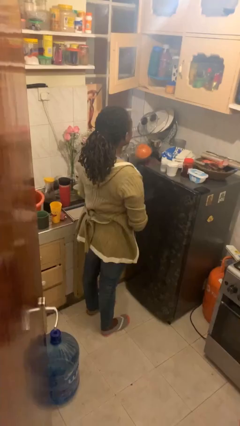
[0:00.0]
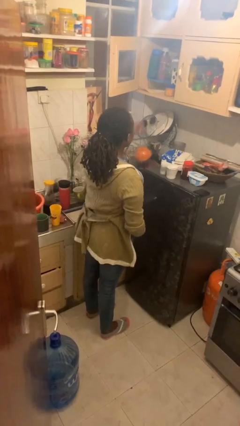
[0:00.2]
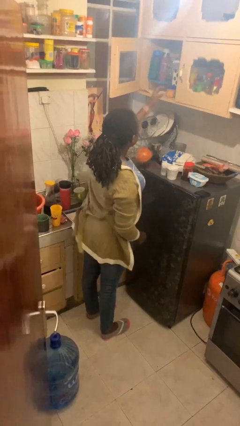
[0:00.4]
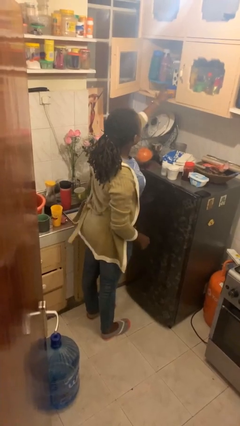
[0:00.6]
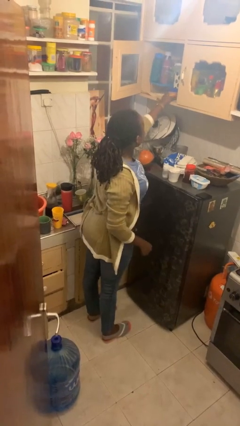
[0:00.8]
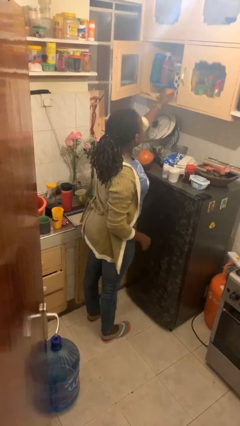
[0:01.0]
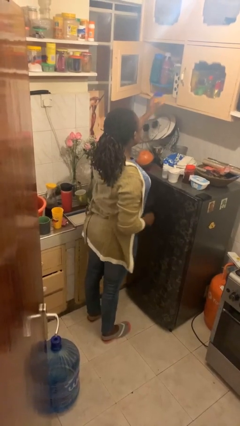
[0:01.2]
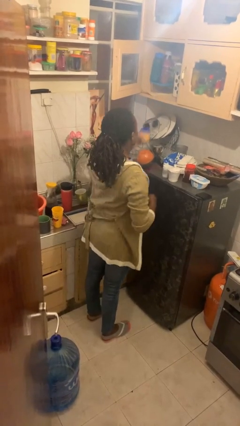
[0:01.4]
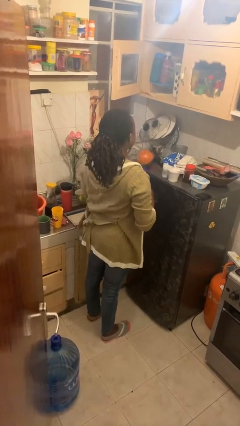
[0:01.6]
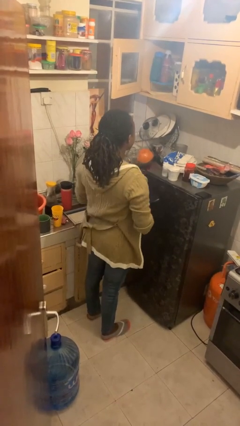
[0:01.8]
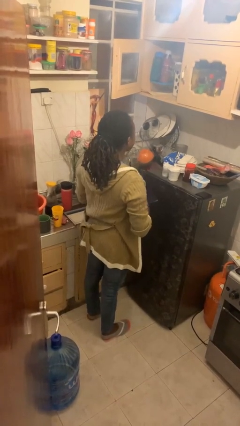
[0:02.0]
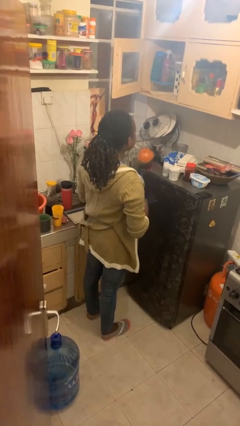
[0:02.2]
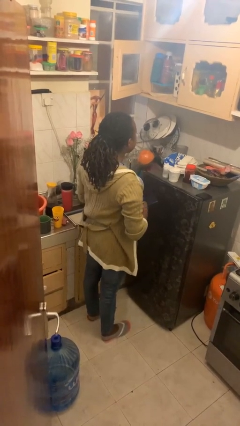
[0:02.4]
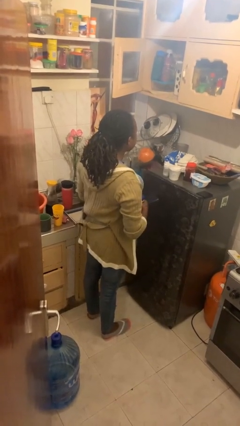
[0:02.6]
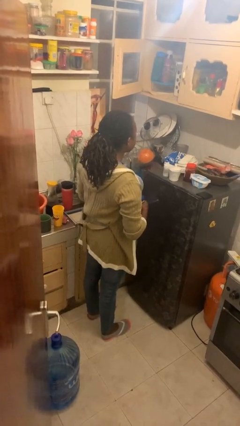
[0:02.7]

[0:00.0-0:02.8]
person picks up object from countertop

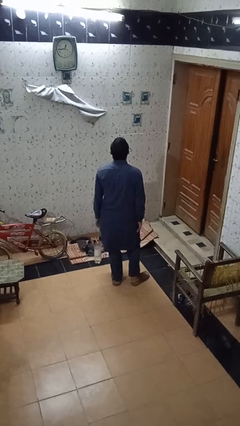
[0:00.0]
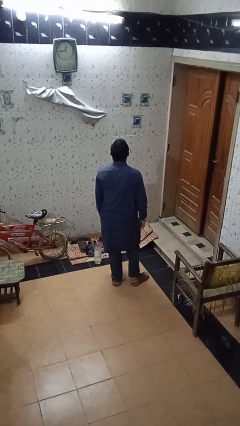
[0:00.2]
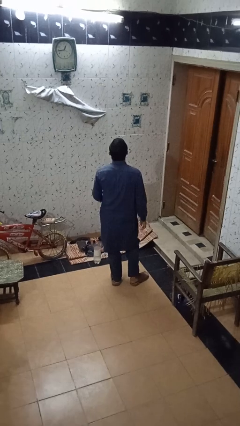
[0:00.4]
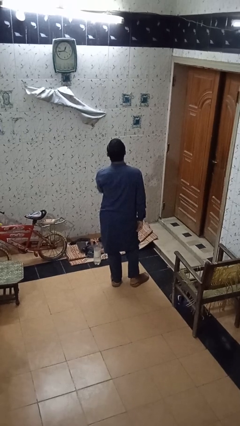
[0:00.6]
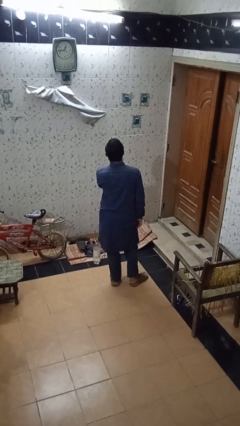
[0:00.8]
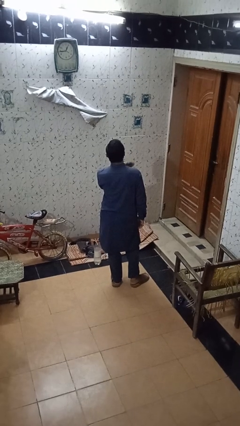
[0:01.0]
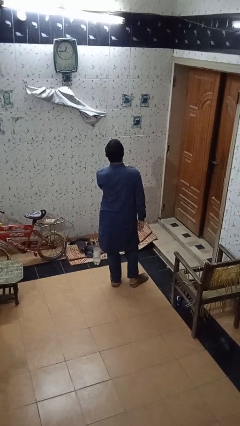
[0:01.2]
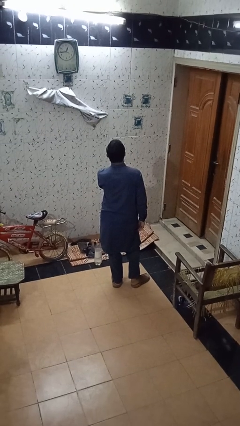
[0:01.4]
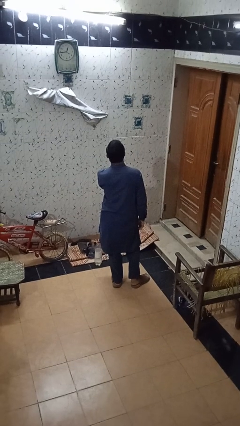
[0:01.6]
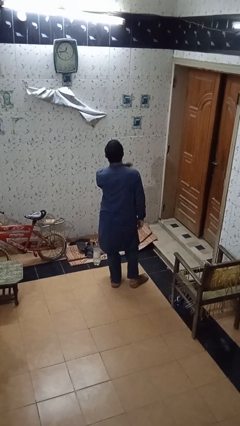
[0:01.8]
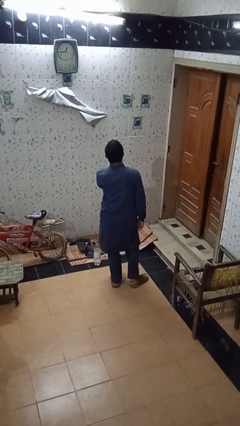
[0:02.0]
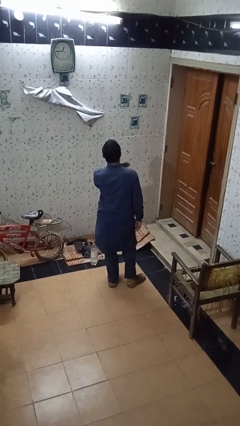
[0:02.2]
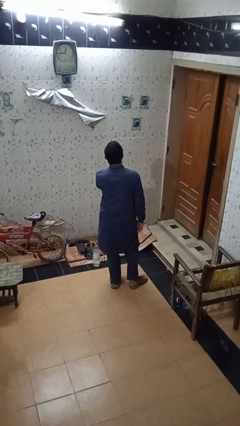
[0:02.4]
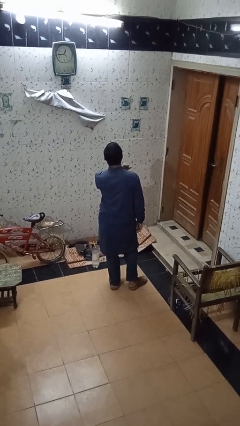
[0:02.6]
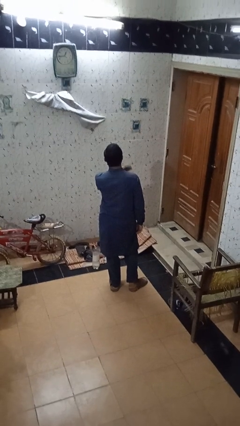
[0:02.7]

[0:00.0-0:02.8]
person drums on chest

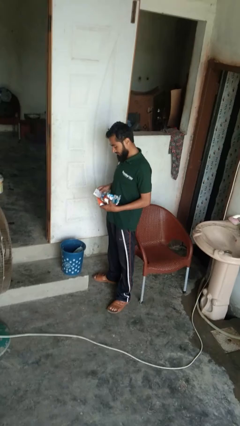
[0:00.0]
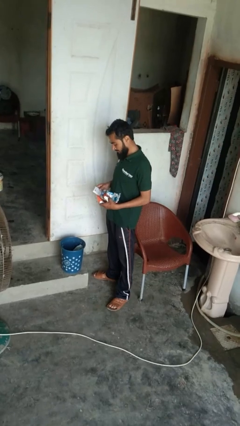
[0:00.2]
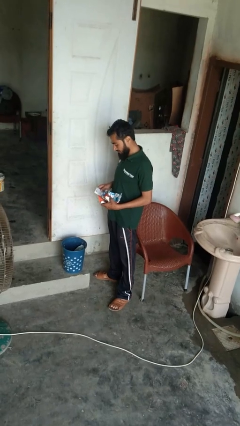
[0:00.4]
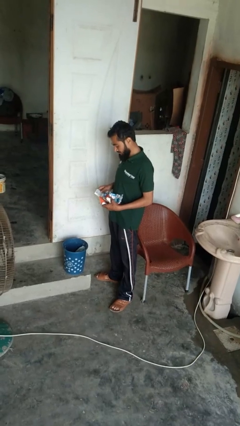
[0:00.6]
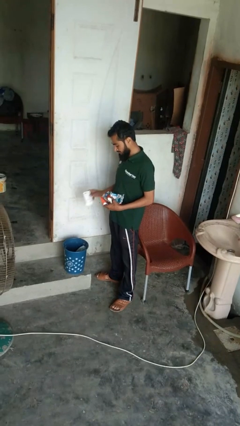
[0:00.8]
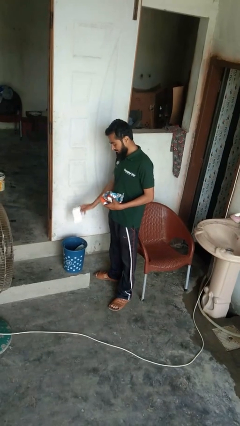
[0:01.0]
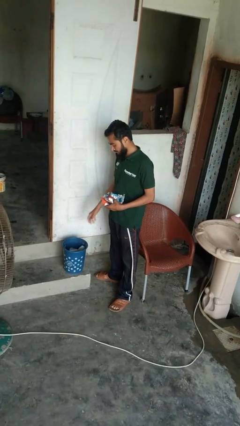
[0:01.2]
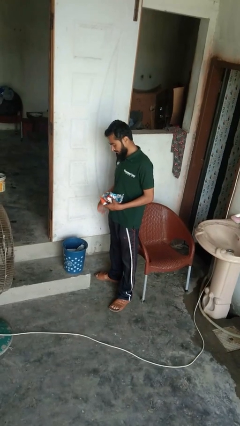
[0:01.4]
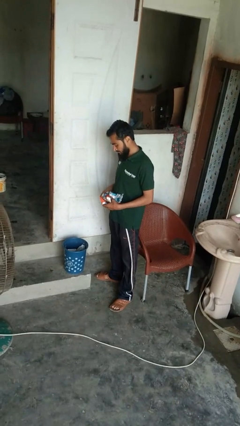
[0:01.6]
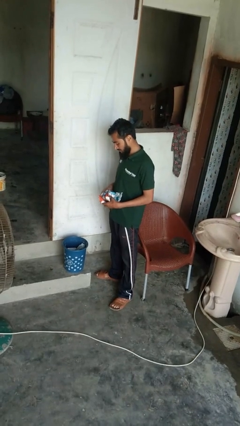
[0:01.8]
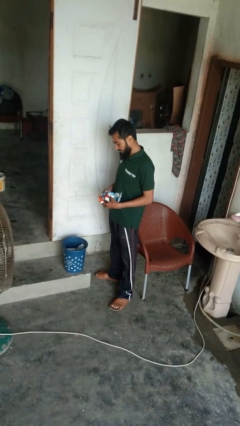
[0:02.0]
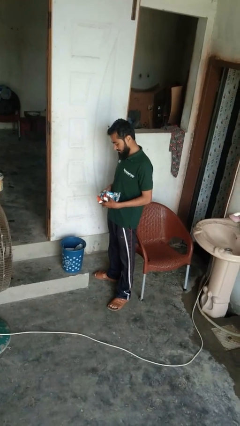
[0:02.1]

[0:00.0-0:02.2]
person discards trash

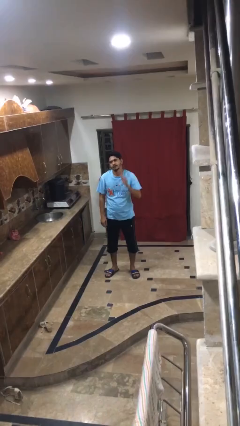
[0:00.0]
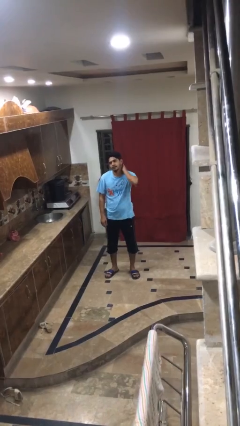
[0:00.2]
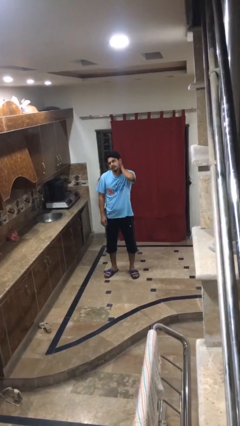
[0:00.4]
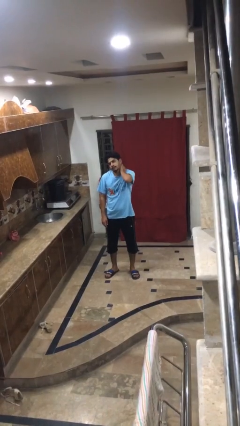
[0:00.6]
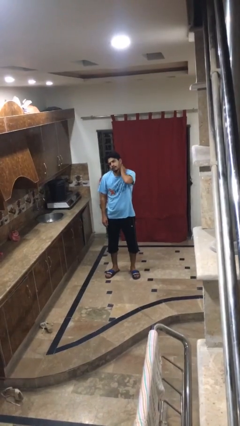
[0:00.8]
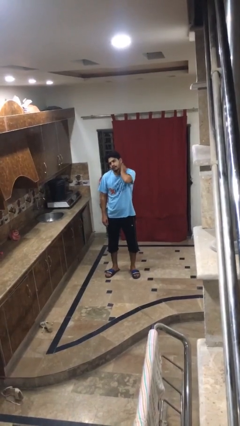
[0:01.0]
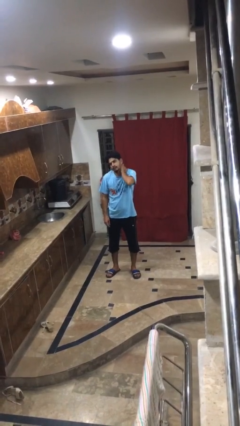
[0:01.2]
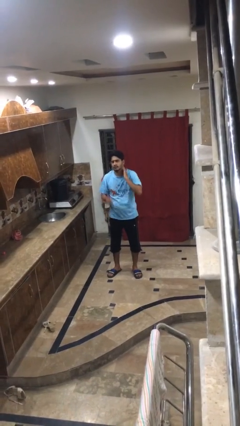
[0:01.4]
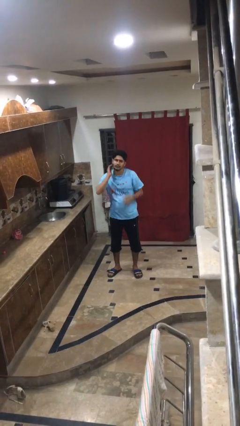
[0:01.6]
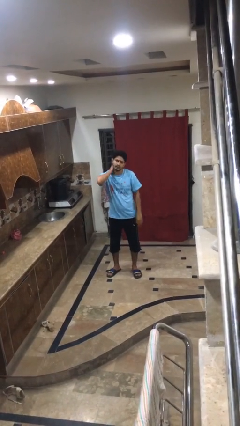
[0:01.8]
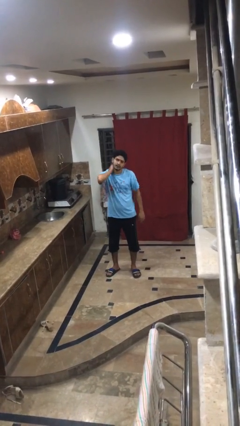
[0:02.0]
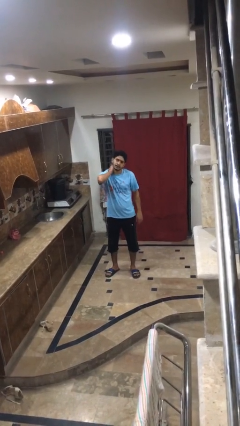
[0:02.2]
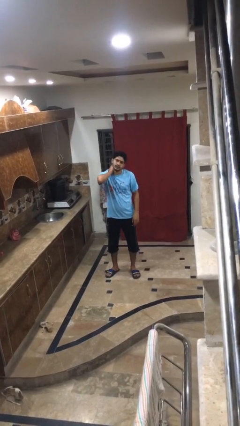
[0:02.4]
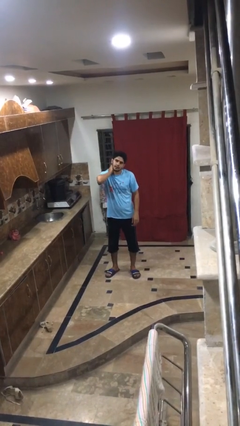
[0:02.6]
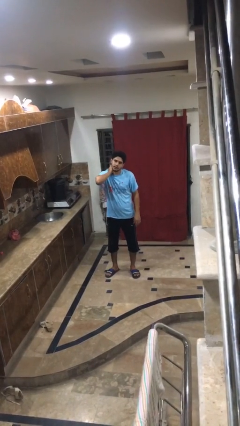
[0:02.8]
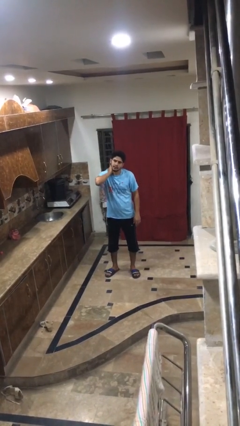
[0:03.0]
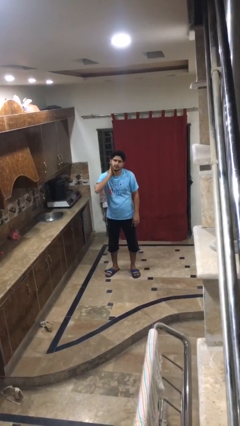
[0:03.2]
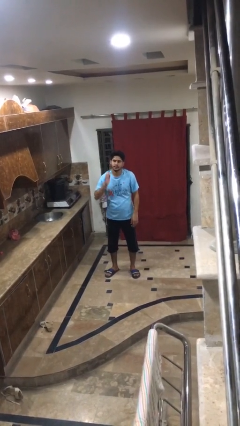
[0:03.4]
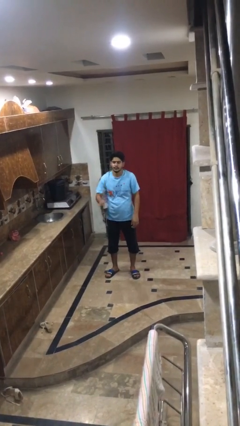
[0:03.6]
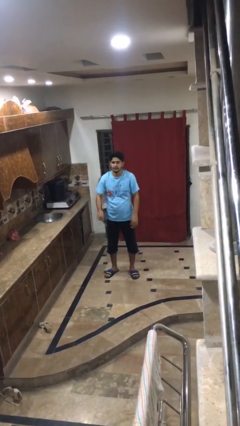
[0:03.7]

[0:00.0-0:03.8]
person rubs neck

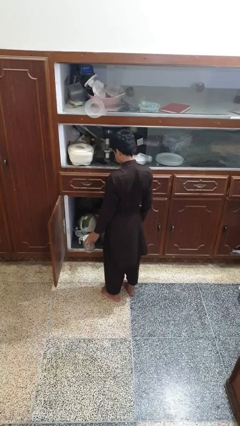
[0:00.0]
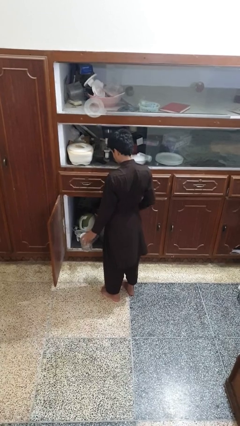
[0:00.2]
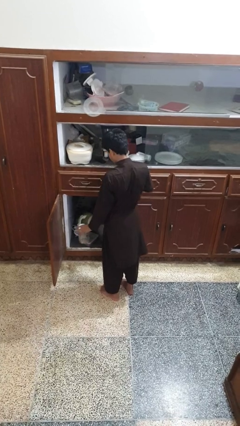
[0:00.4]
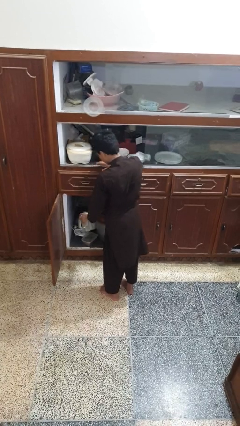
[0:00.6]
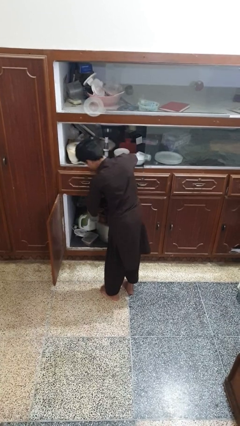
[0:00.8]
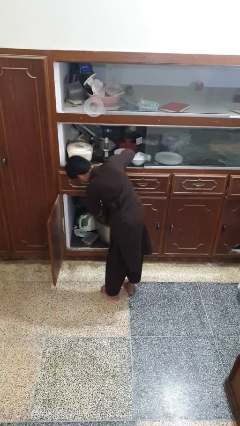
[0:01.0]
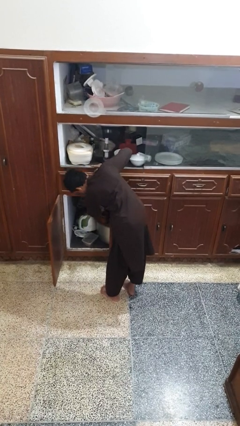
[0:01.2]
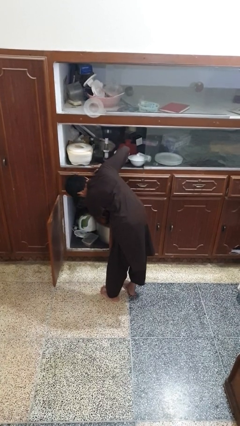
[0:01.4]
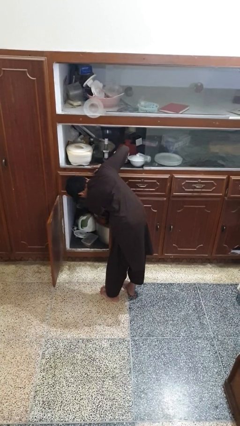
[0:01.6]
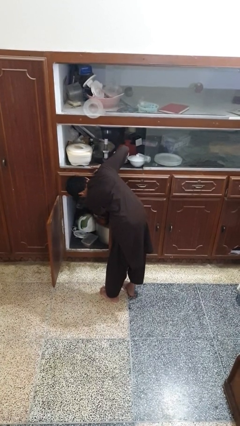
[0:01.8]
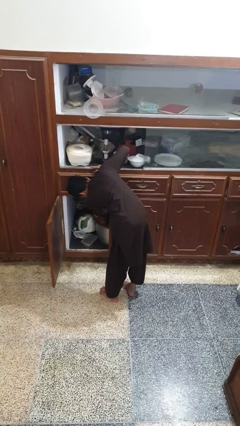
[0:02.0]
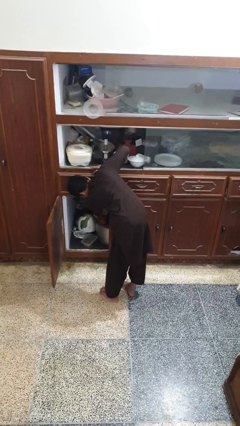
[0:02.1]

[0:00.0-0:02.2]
person puts object in cabinet

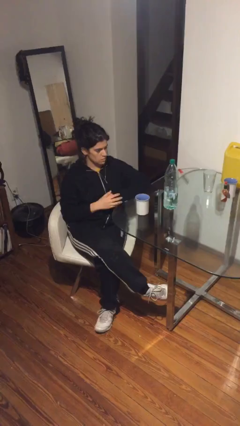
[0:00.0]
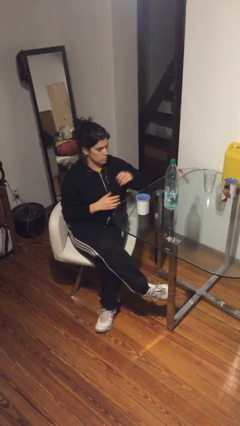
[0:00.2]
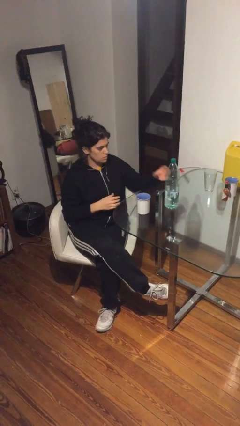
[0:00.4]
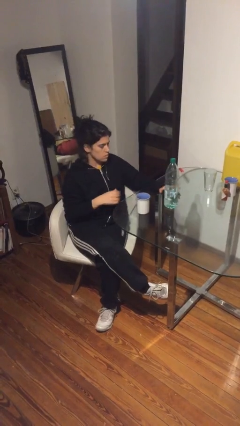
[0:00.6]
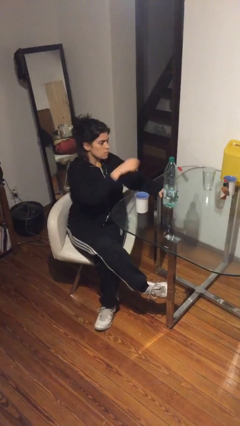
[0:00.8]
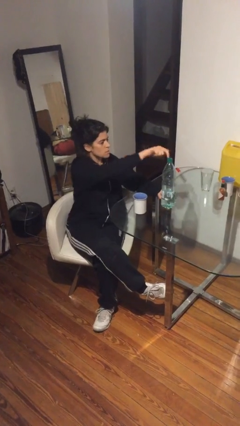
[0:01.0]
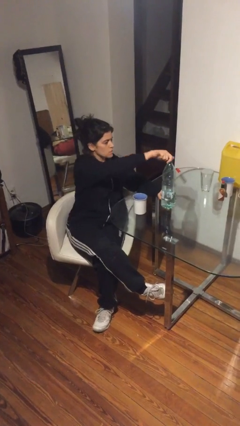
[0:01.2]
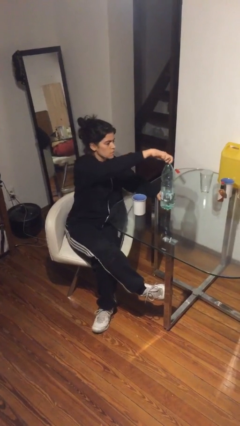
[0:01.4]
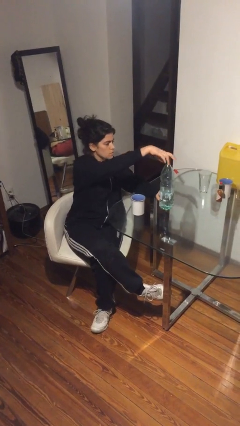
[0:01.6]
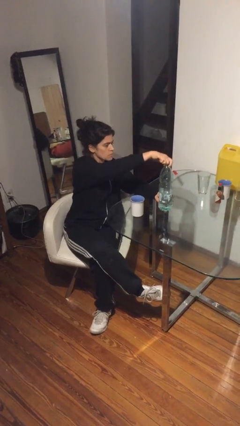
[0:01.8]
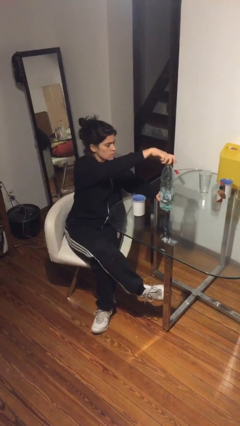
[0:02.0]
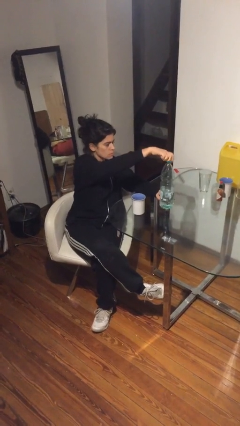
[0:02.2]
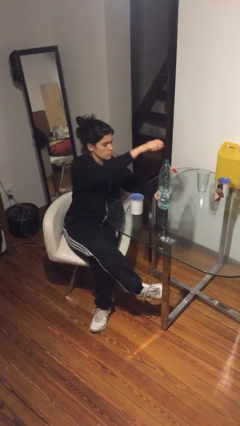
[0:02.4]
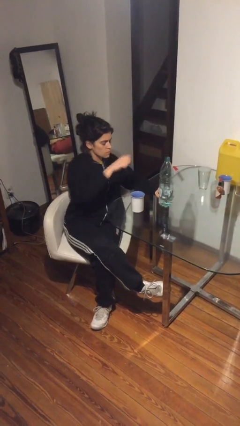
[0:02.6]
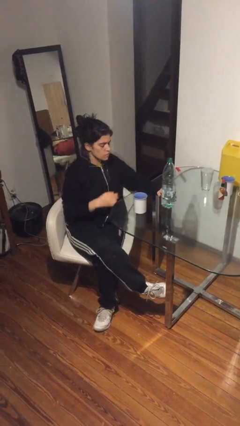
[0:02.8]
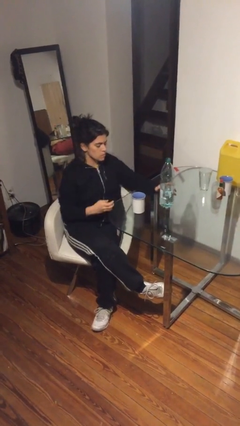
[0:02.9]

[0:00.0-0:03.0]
person unscrews lid from bottle

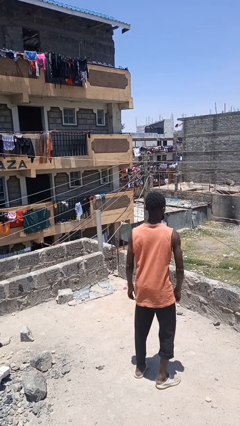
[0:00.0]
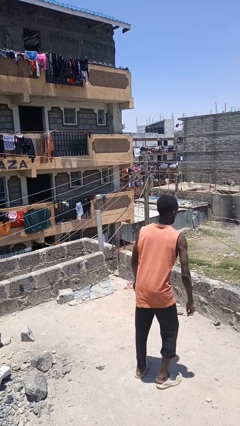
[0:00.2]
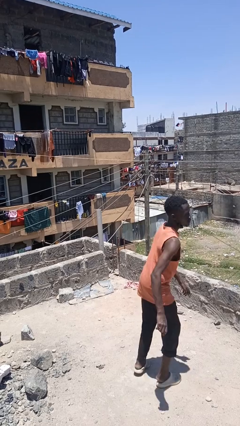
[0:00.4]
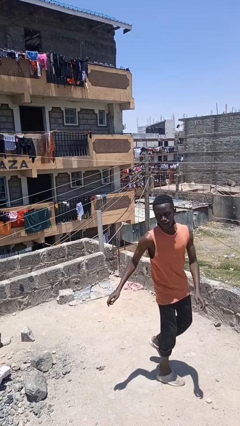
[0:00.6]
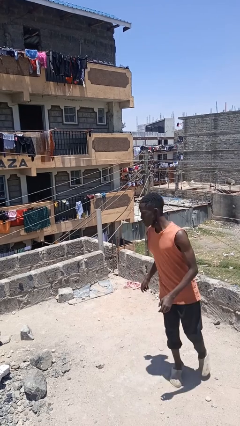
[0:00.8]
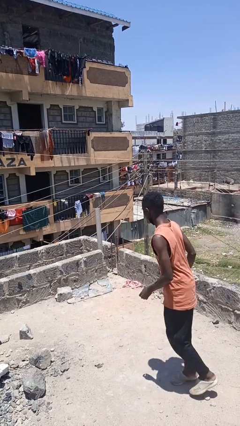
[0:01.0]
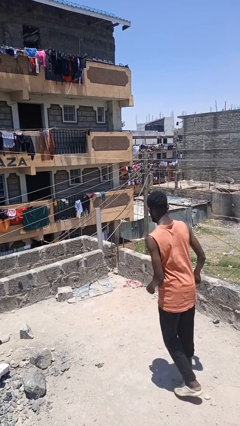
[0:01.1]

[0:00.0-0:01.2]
person twirls
